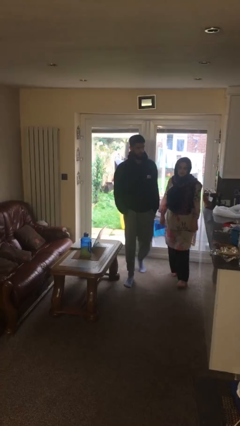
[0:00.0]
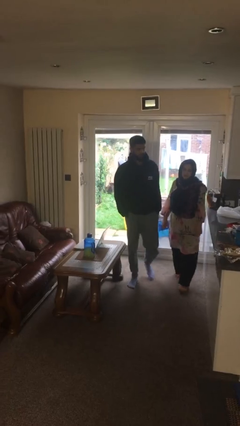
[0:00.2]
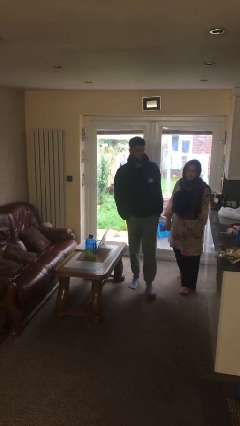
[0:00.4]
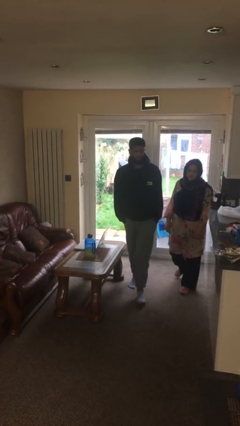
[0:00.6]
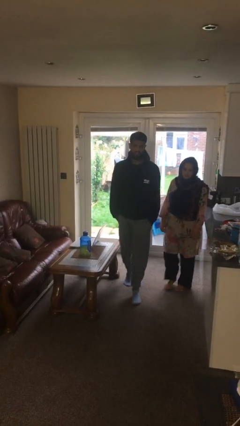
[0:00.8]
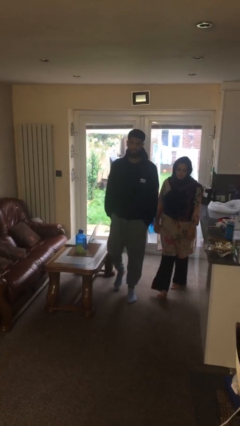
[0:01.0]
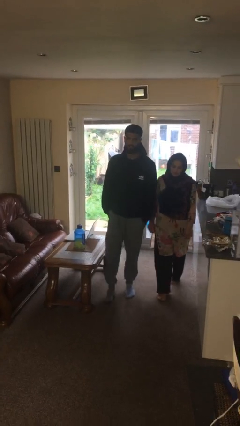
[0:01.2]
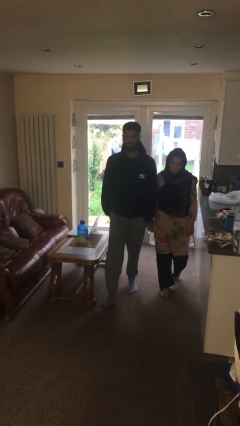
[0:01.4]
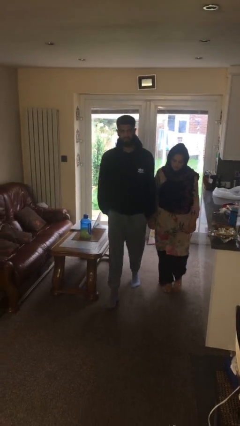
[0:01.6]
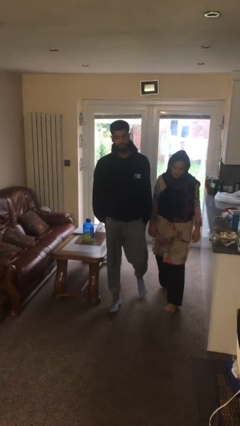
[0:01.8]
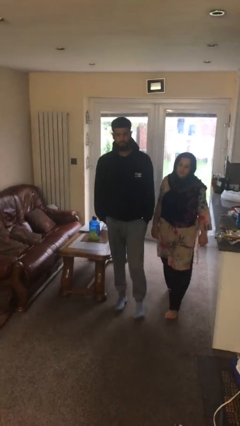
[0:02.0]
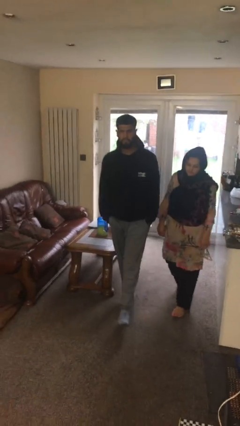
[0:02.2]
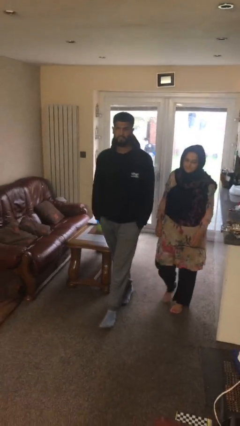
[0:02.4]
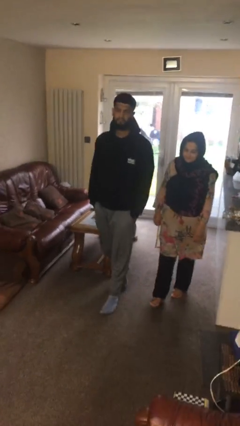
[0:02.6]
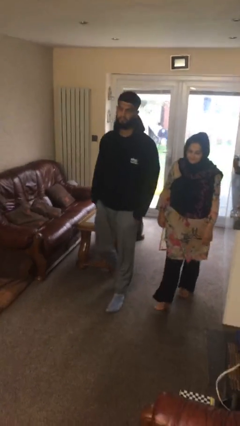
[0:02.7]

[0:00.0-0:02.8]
person talks to person

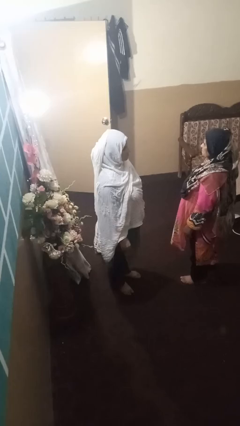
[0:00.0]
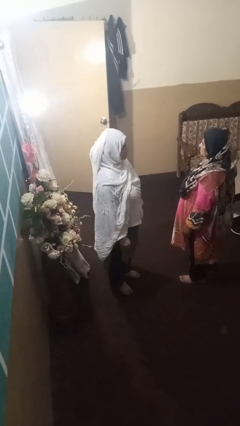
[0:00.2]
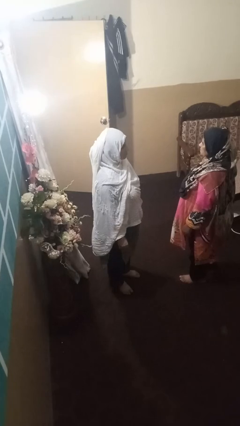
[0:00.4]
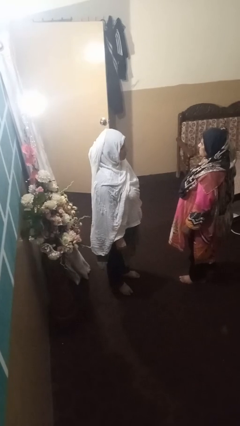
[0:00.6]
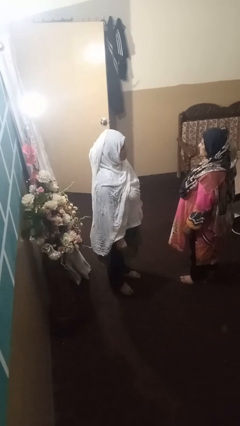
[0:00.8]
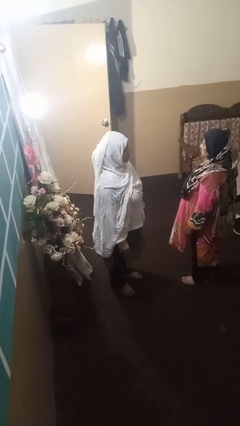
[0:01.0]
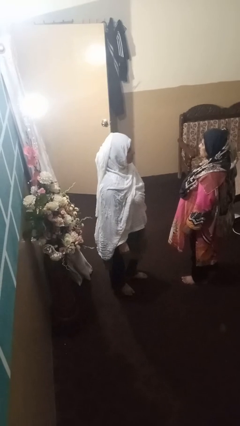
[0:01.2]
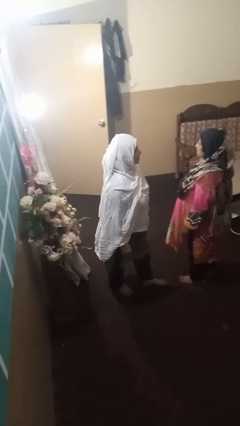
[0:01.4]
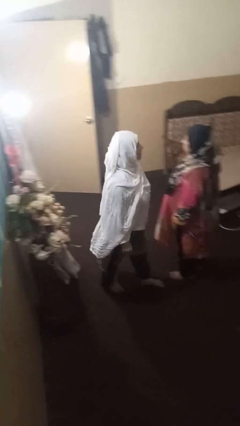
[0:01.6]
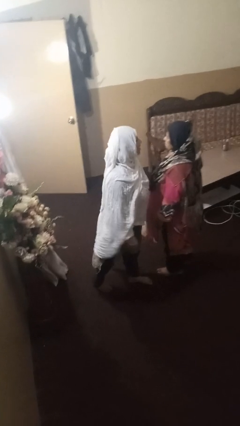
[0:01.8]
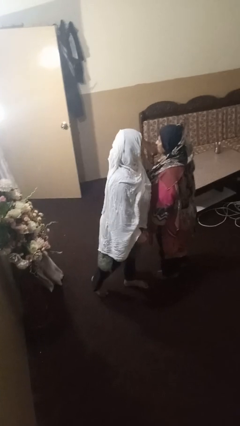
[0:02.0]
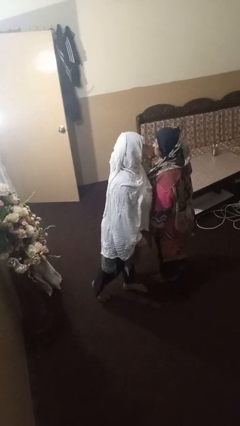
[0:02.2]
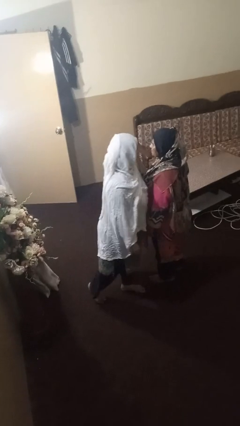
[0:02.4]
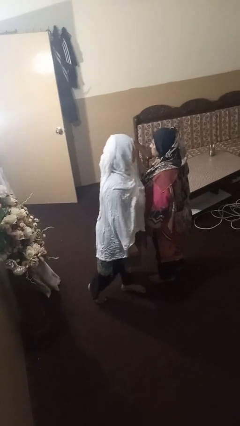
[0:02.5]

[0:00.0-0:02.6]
person laughs with person

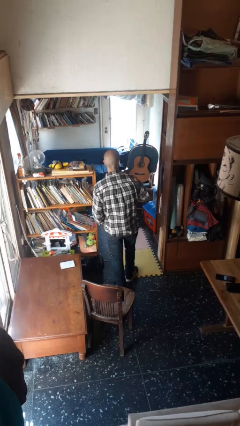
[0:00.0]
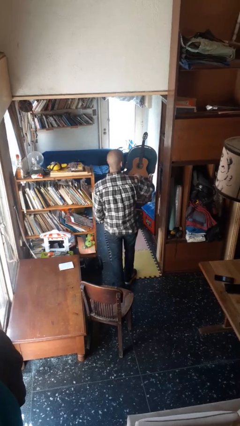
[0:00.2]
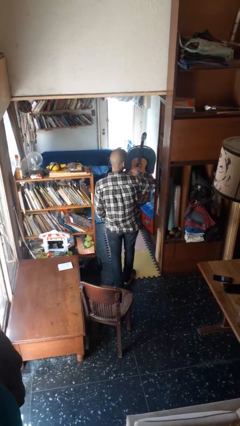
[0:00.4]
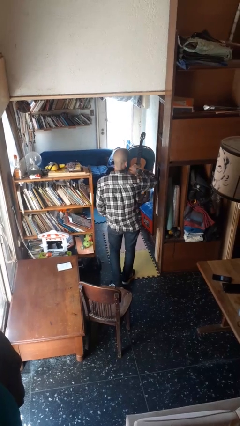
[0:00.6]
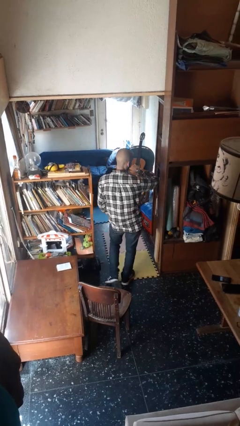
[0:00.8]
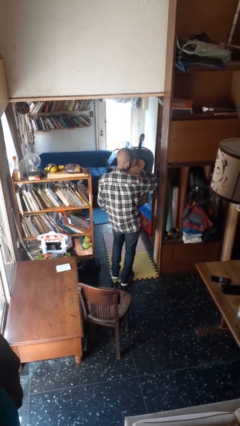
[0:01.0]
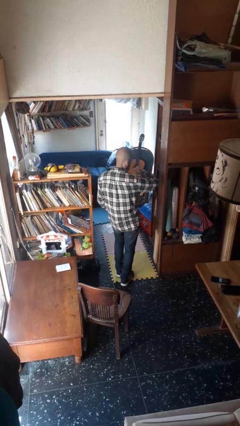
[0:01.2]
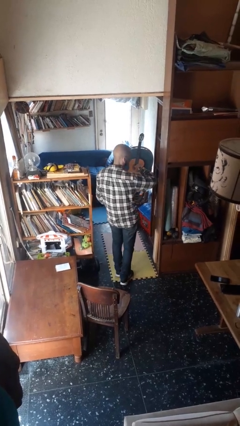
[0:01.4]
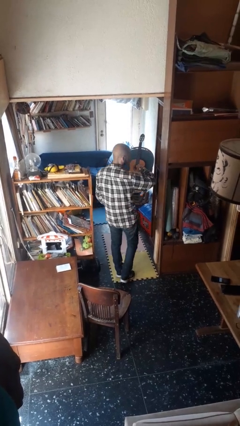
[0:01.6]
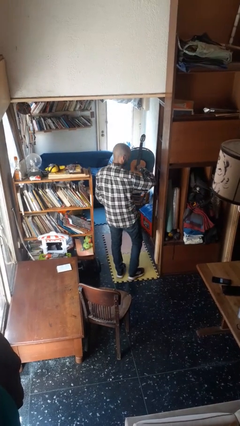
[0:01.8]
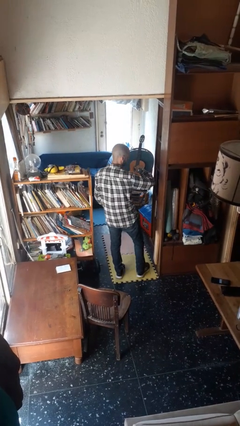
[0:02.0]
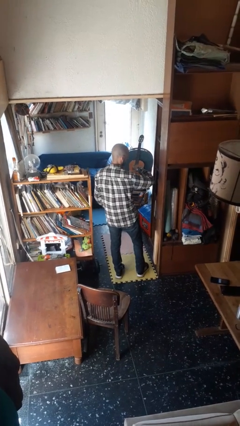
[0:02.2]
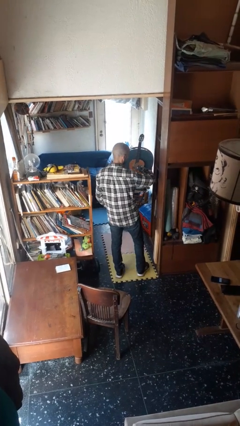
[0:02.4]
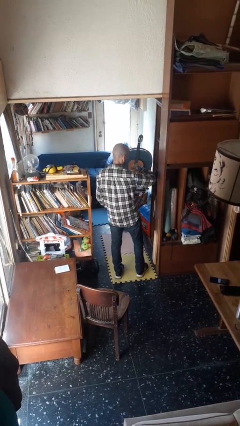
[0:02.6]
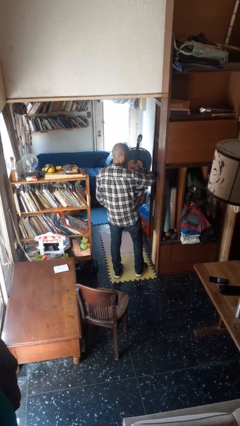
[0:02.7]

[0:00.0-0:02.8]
person looks at wristwatch

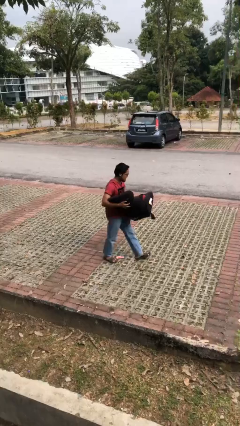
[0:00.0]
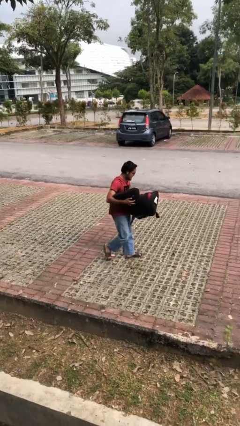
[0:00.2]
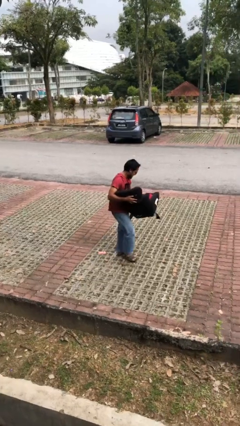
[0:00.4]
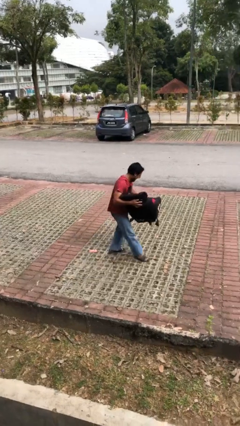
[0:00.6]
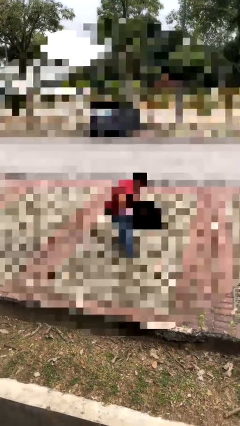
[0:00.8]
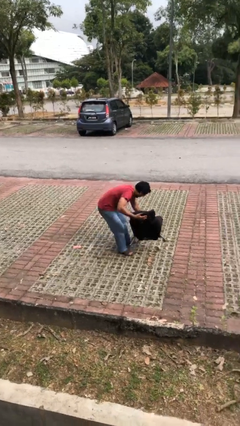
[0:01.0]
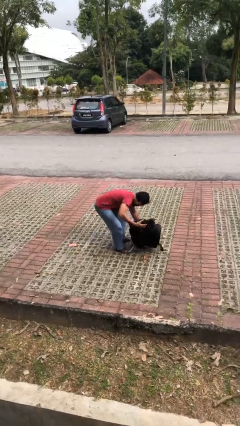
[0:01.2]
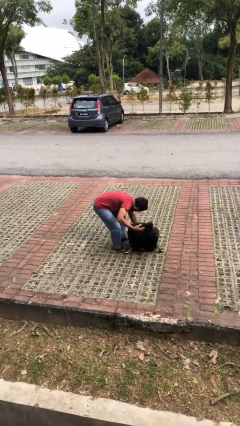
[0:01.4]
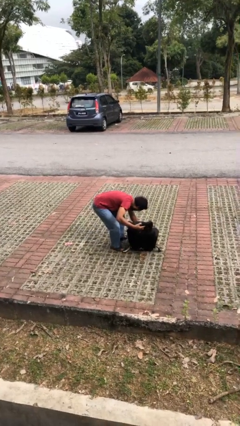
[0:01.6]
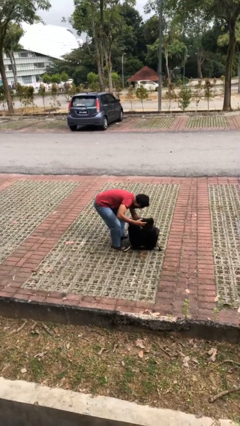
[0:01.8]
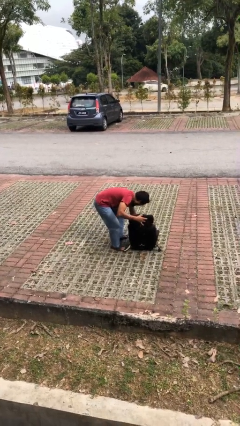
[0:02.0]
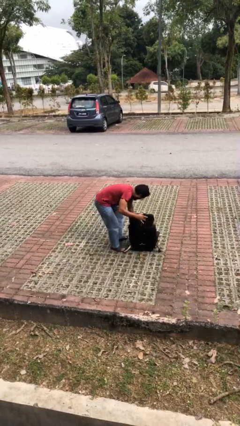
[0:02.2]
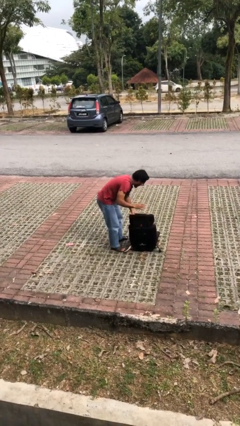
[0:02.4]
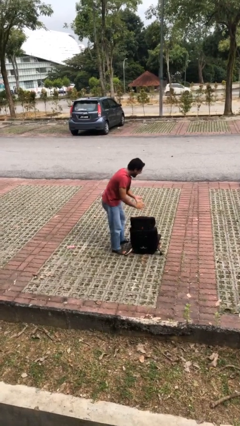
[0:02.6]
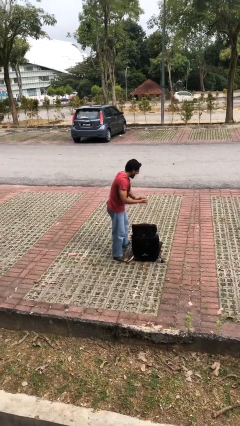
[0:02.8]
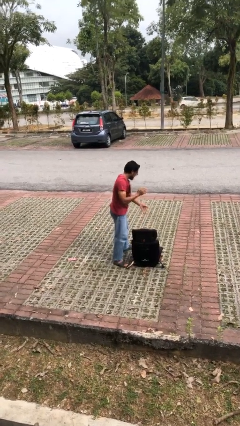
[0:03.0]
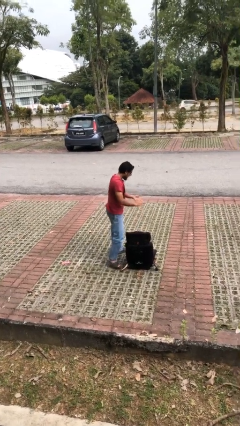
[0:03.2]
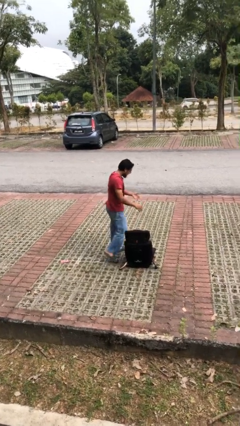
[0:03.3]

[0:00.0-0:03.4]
person puts down object on floor

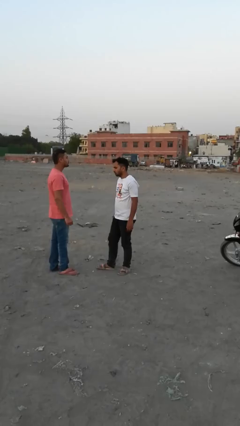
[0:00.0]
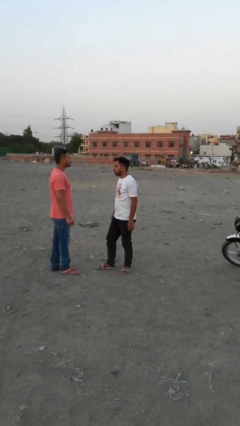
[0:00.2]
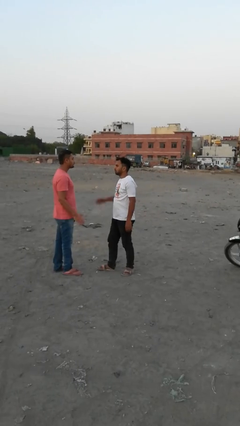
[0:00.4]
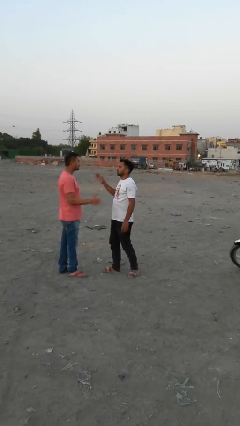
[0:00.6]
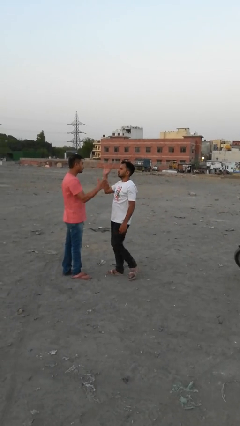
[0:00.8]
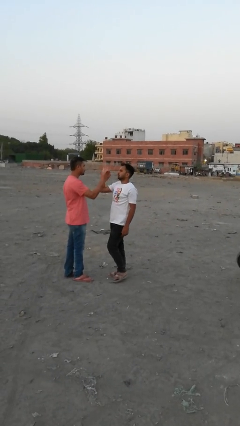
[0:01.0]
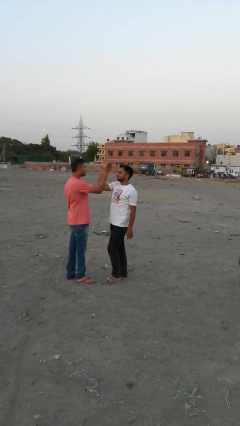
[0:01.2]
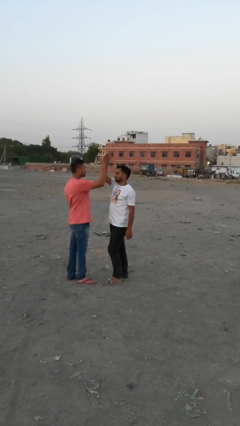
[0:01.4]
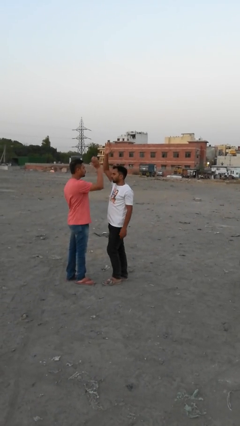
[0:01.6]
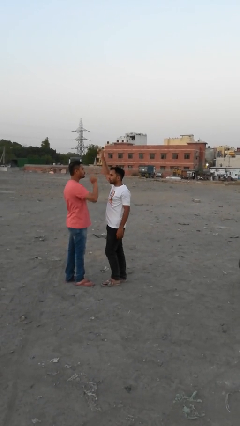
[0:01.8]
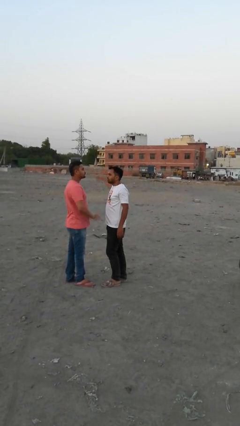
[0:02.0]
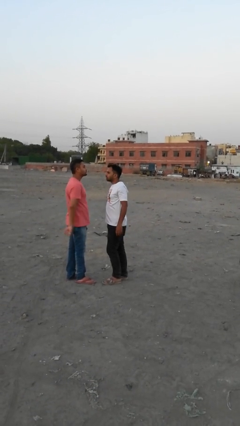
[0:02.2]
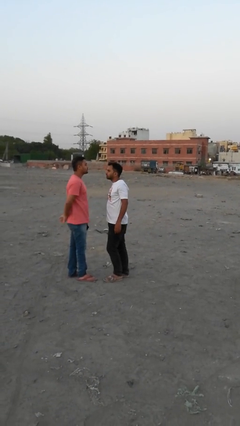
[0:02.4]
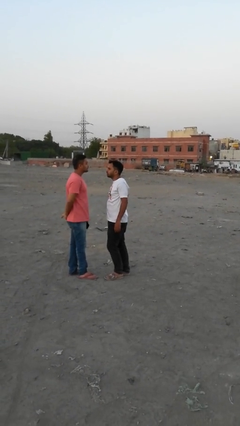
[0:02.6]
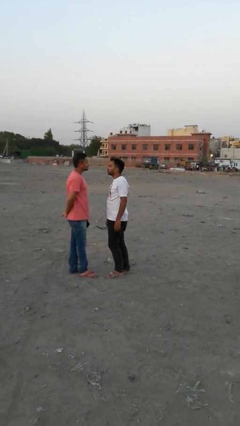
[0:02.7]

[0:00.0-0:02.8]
person highfives hand

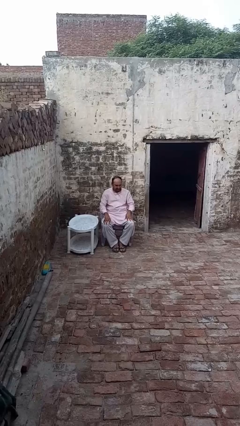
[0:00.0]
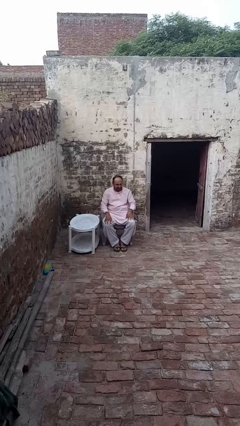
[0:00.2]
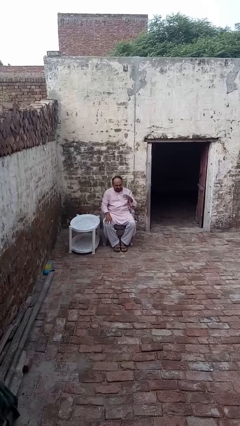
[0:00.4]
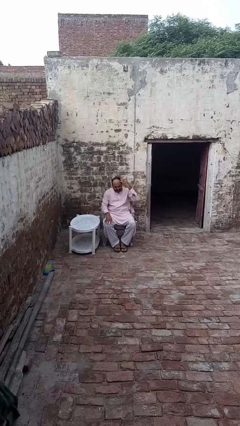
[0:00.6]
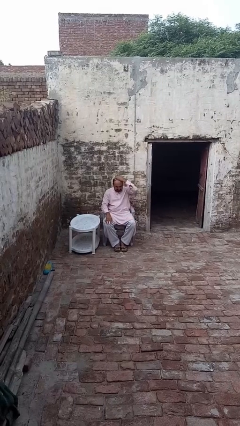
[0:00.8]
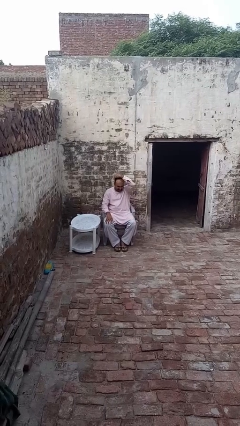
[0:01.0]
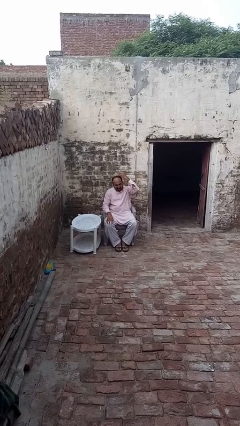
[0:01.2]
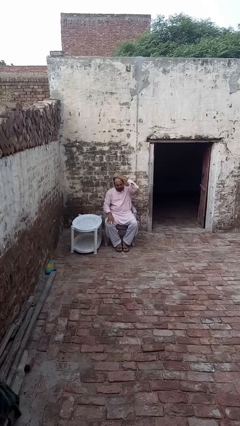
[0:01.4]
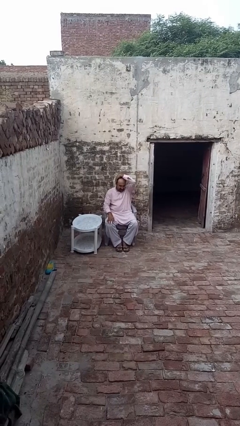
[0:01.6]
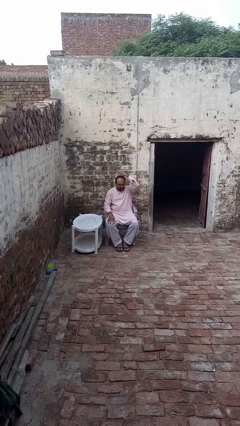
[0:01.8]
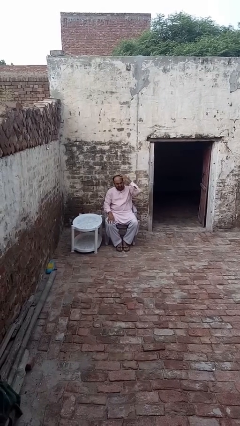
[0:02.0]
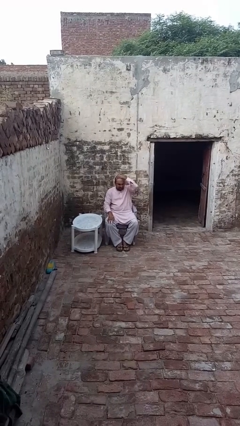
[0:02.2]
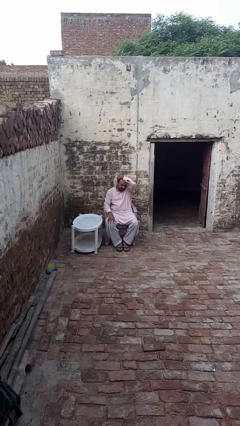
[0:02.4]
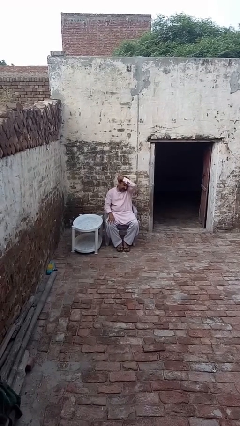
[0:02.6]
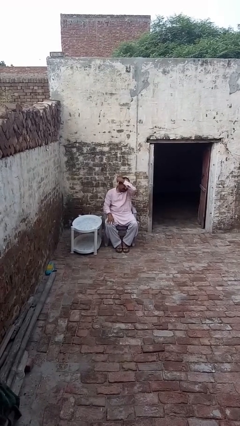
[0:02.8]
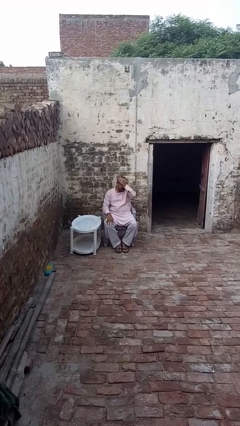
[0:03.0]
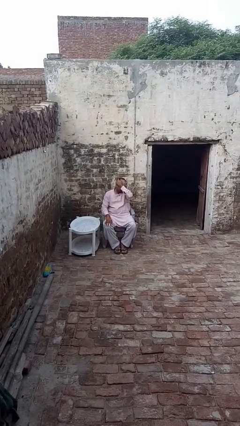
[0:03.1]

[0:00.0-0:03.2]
person strokes hair
